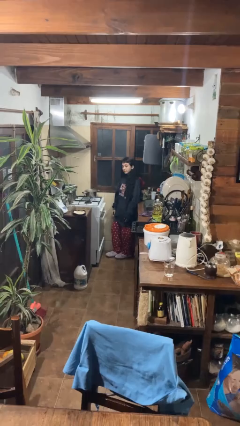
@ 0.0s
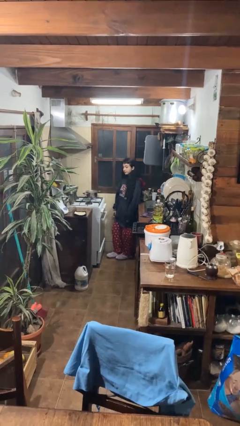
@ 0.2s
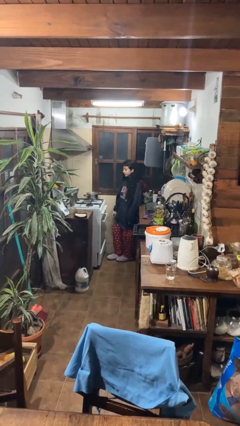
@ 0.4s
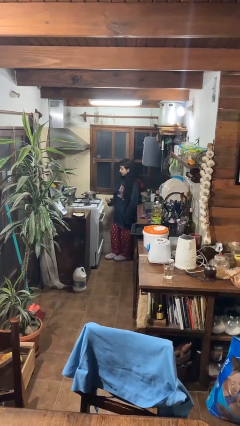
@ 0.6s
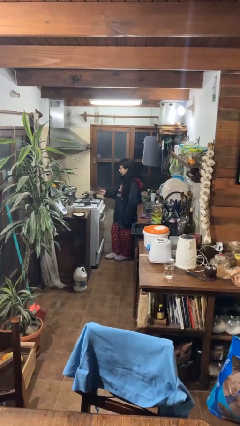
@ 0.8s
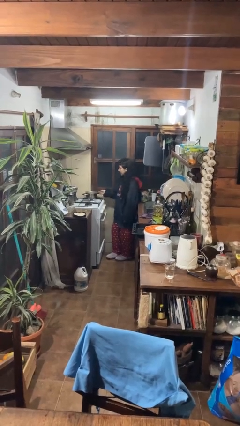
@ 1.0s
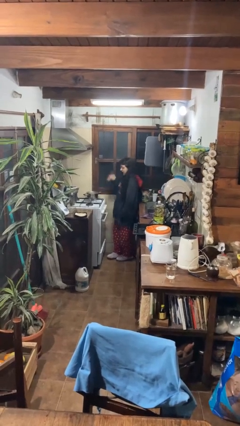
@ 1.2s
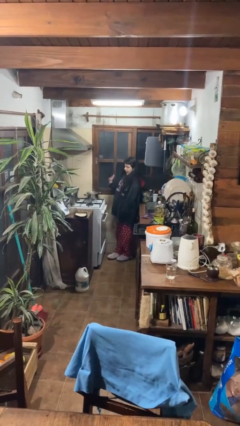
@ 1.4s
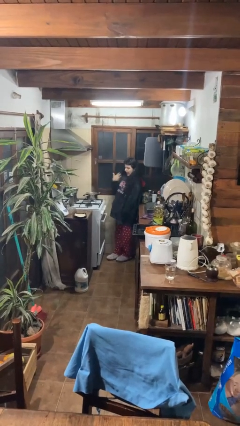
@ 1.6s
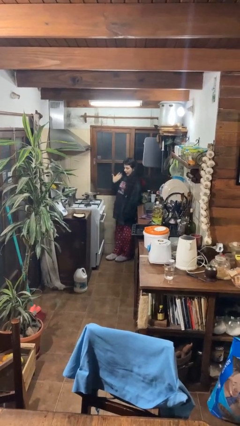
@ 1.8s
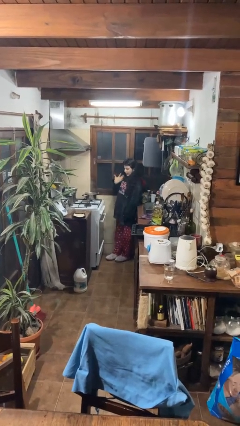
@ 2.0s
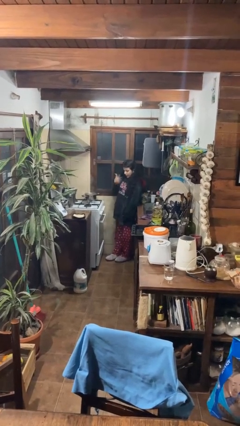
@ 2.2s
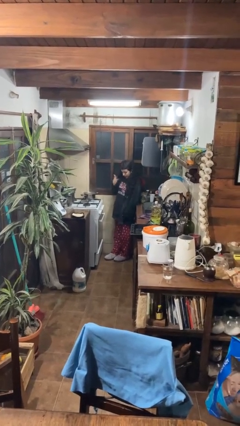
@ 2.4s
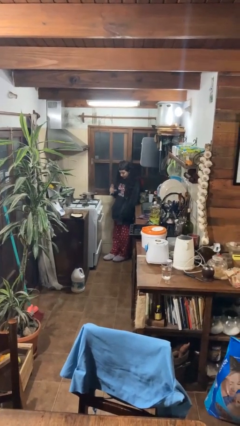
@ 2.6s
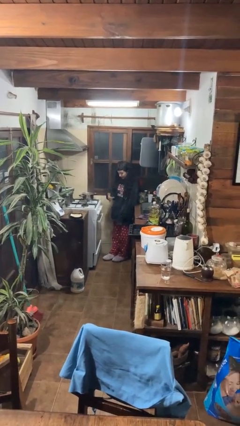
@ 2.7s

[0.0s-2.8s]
person burns hand

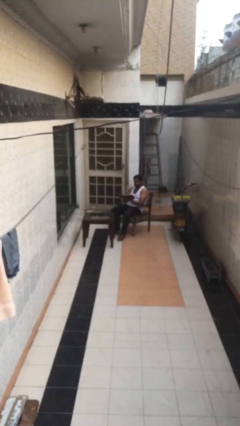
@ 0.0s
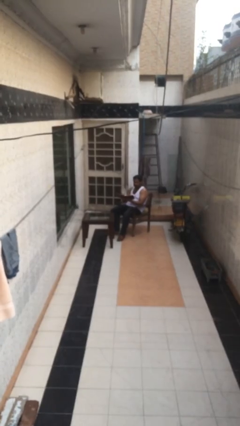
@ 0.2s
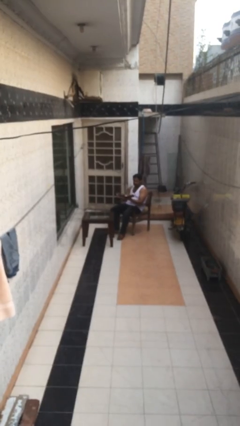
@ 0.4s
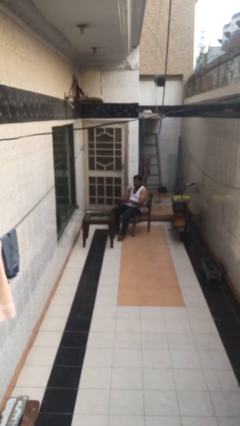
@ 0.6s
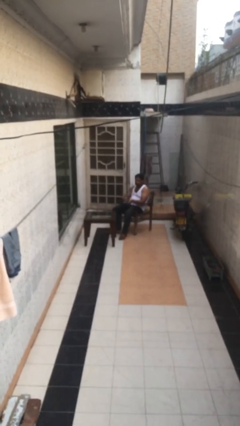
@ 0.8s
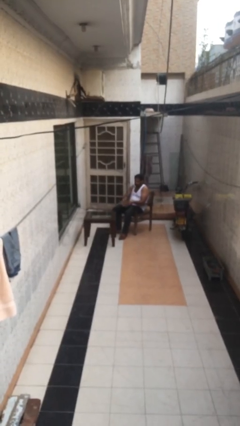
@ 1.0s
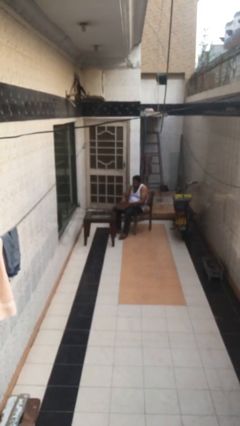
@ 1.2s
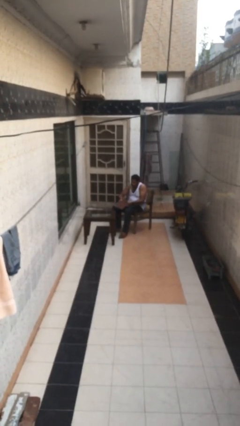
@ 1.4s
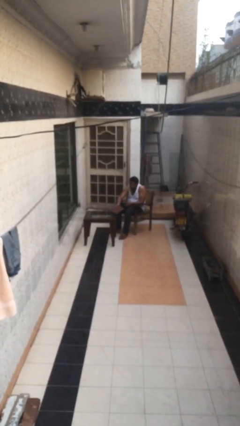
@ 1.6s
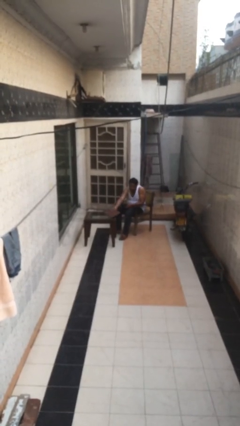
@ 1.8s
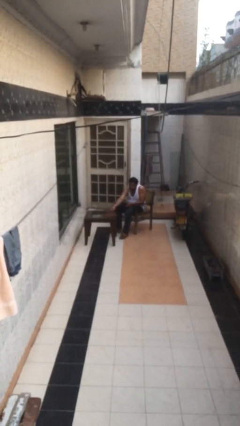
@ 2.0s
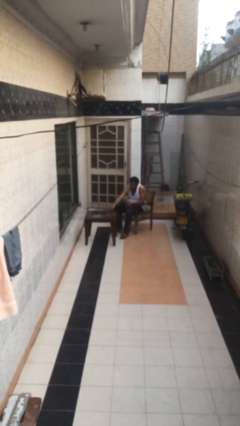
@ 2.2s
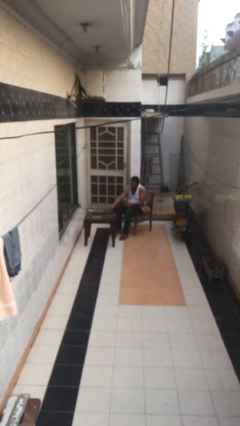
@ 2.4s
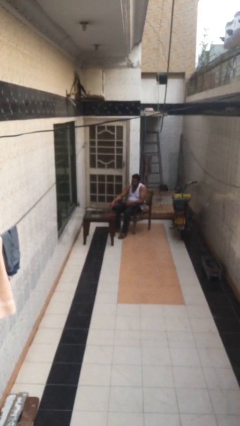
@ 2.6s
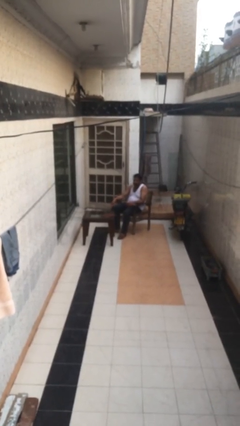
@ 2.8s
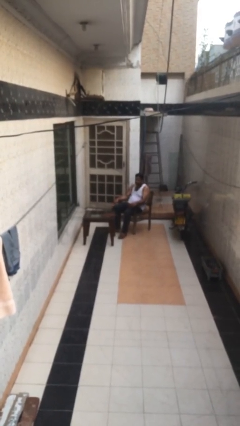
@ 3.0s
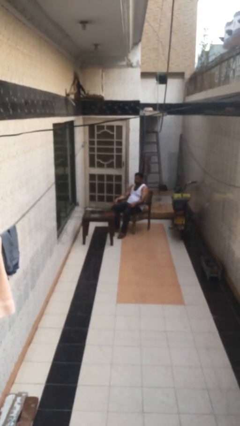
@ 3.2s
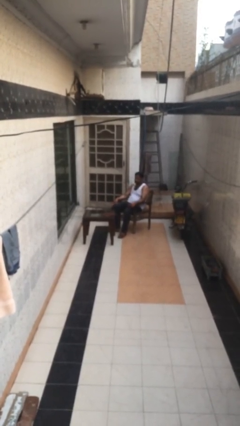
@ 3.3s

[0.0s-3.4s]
person puts down object on table

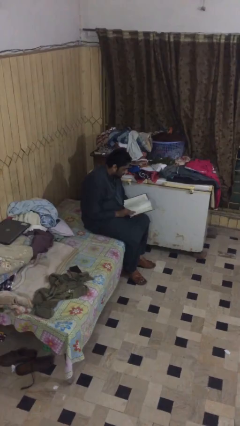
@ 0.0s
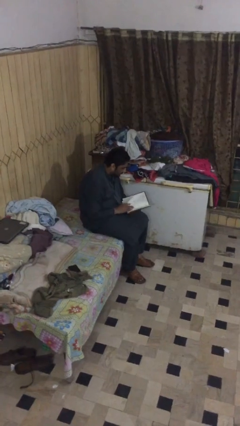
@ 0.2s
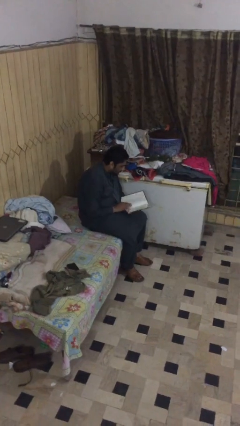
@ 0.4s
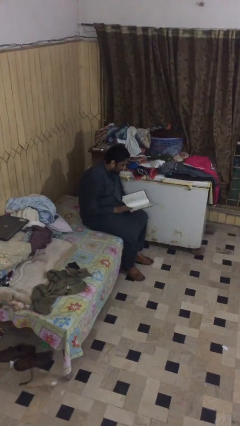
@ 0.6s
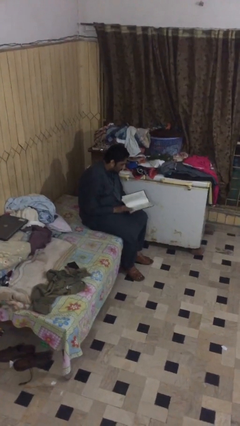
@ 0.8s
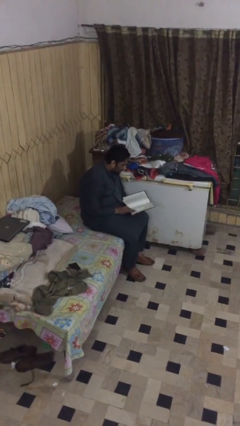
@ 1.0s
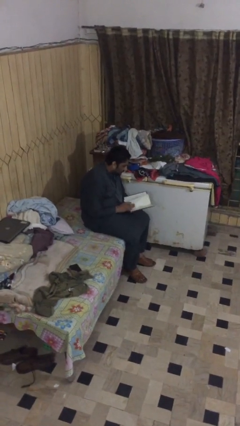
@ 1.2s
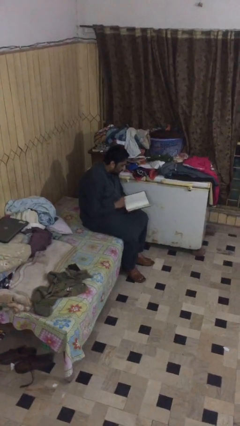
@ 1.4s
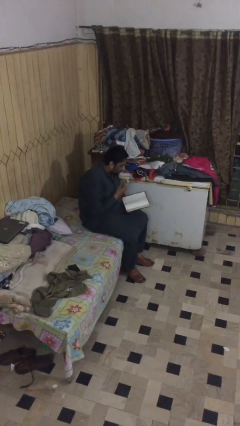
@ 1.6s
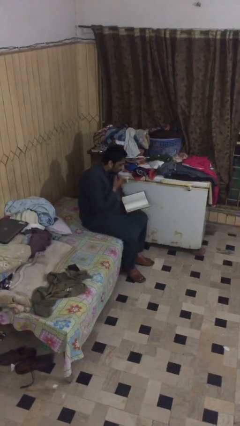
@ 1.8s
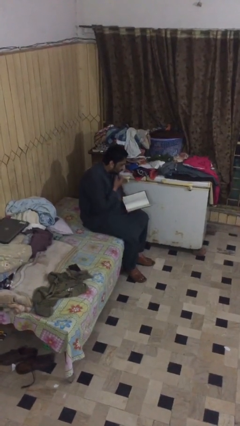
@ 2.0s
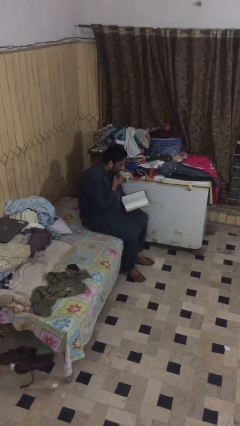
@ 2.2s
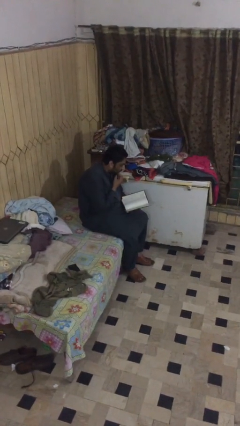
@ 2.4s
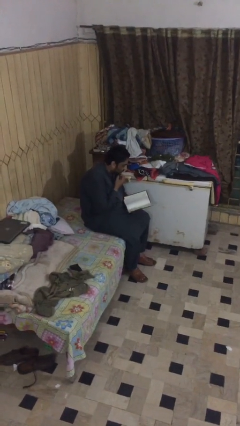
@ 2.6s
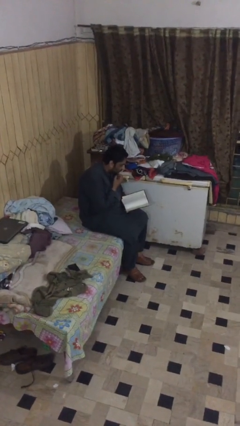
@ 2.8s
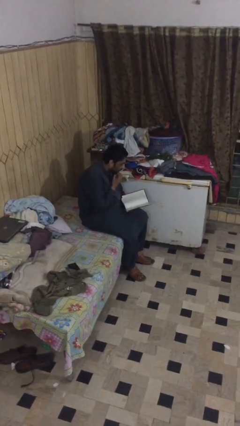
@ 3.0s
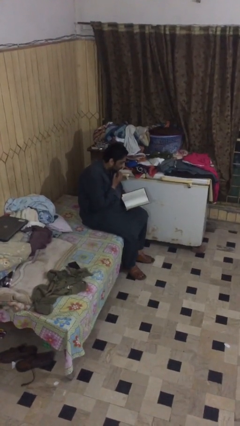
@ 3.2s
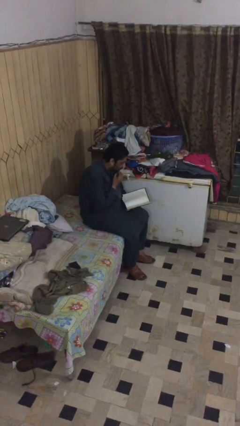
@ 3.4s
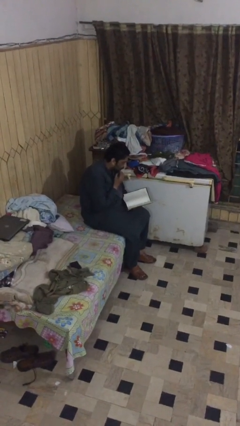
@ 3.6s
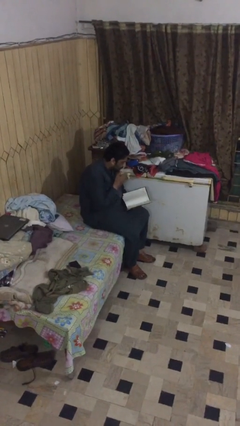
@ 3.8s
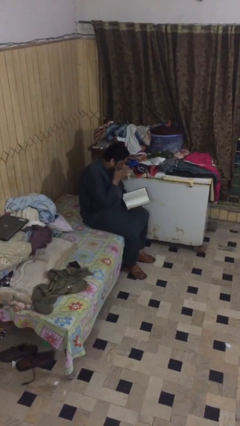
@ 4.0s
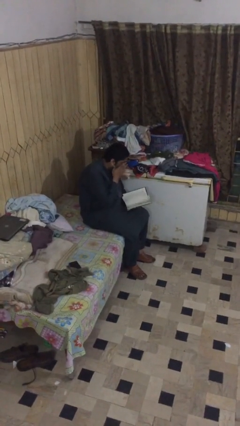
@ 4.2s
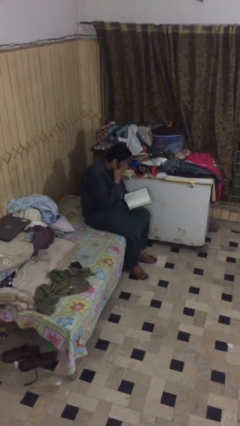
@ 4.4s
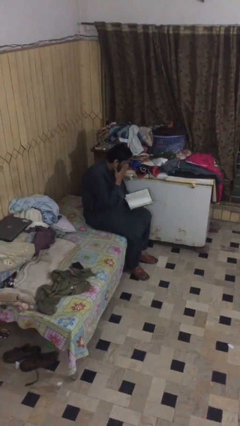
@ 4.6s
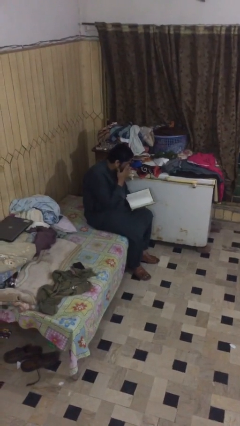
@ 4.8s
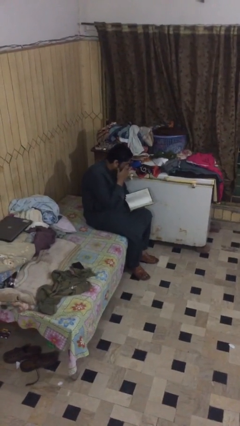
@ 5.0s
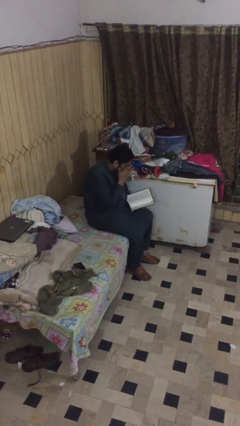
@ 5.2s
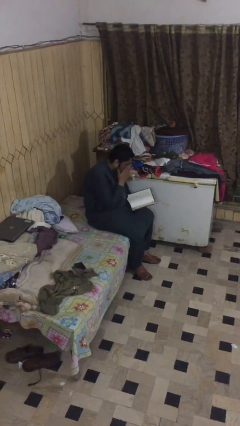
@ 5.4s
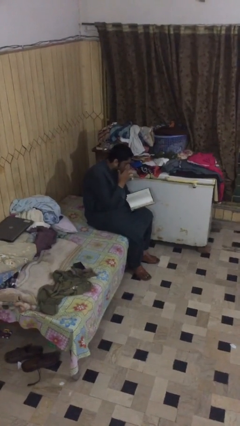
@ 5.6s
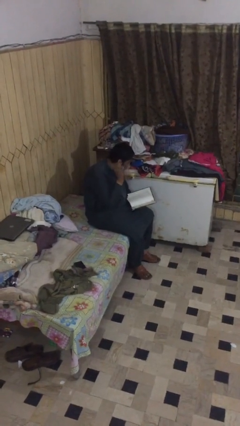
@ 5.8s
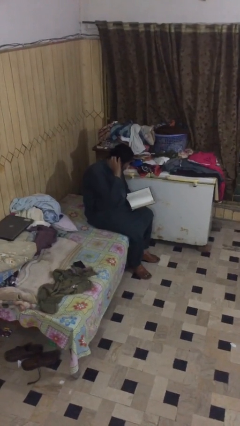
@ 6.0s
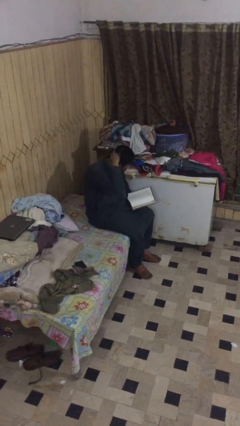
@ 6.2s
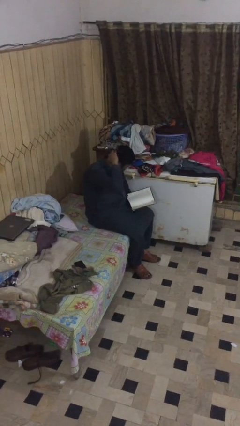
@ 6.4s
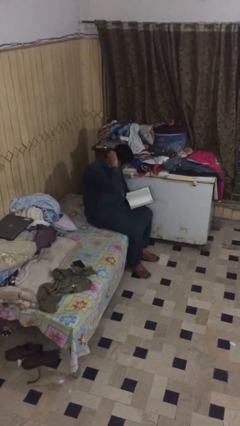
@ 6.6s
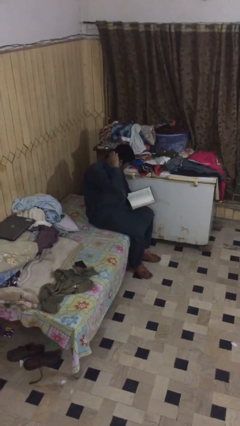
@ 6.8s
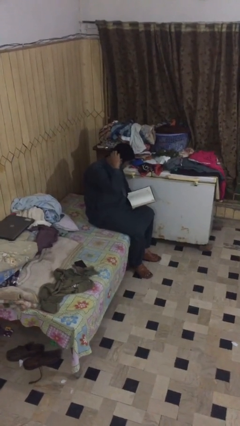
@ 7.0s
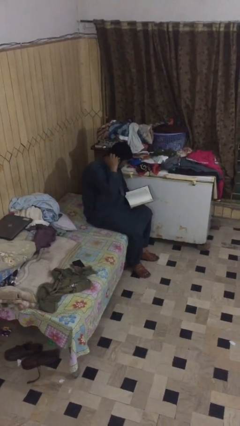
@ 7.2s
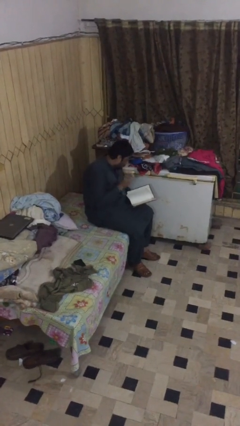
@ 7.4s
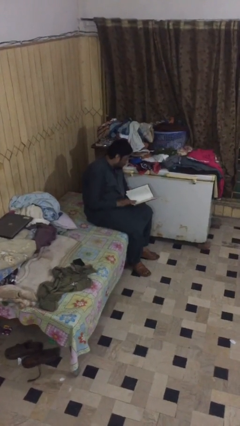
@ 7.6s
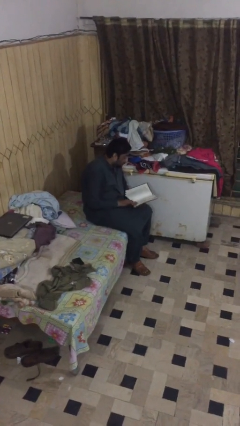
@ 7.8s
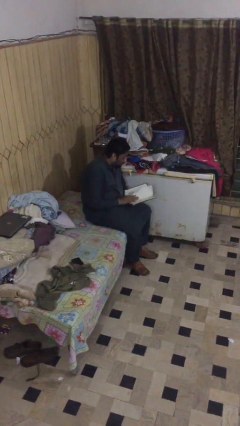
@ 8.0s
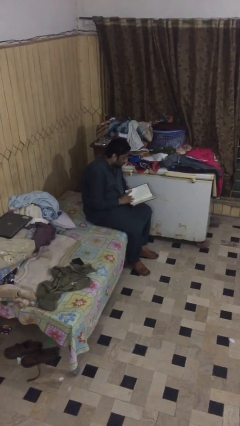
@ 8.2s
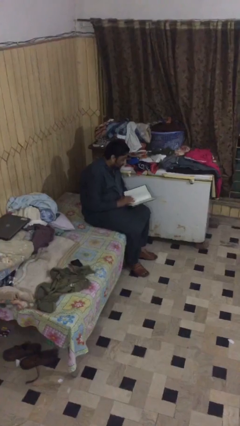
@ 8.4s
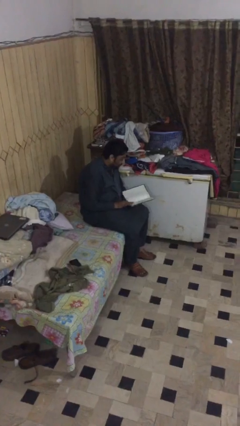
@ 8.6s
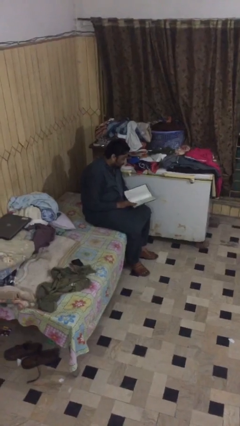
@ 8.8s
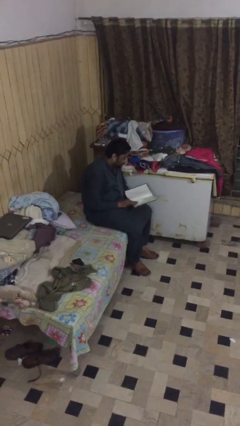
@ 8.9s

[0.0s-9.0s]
person reads document

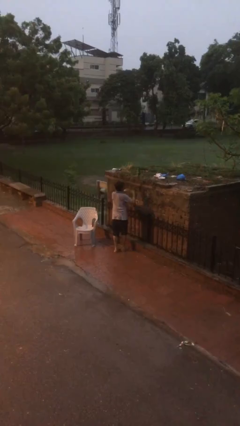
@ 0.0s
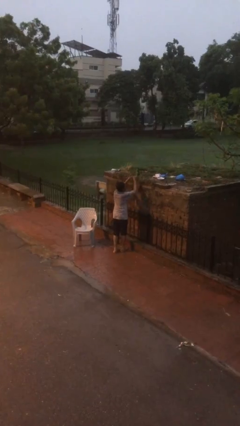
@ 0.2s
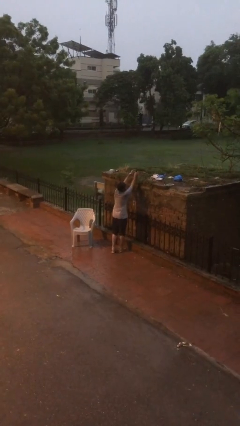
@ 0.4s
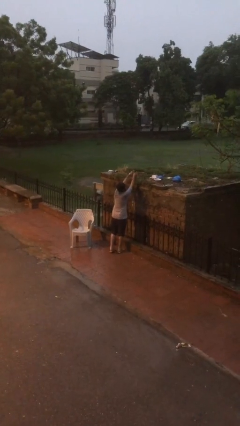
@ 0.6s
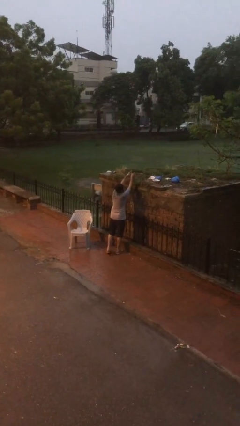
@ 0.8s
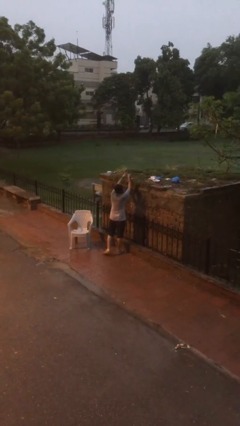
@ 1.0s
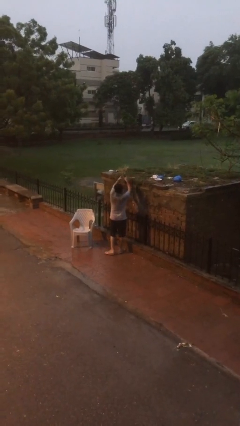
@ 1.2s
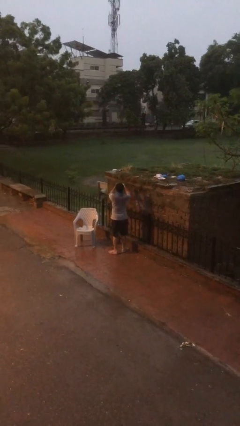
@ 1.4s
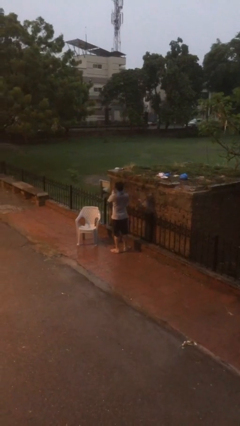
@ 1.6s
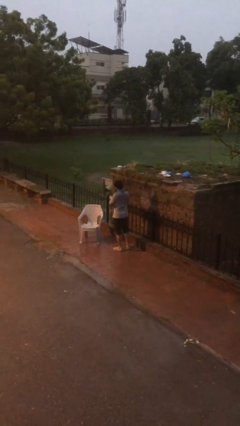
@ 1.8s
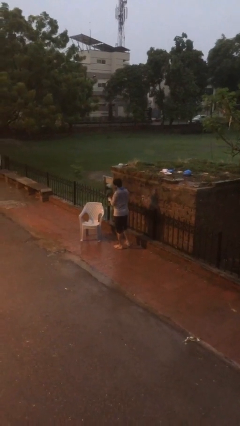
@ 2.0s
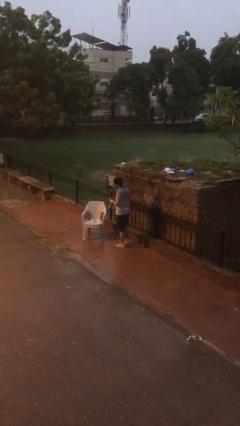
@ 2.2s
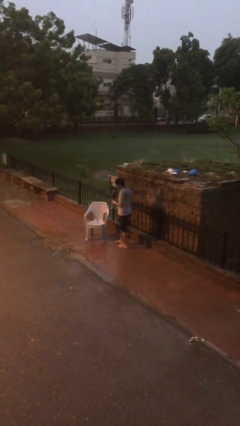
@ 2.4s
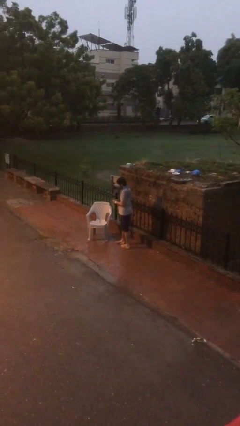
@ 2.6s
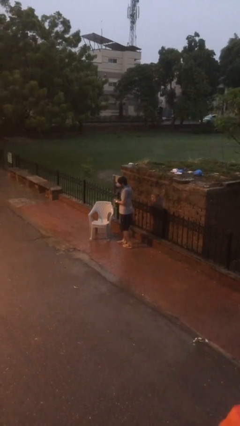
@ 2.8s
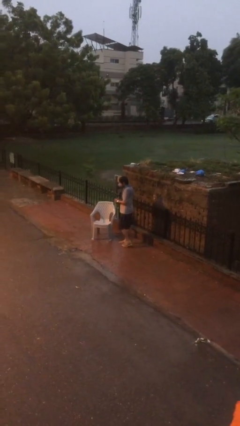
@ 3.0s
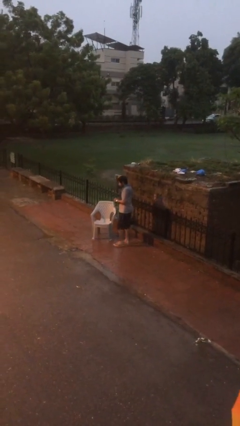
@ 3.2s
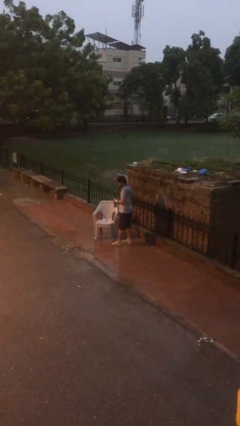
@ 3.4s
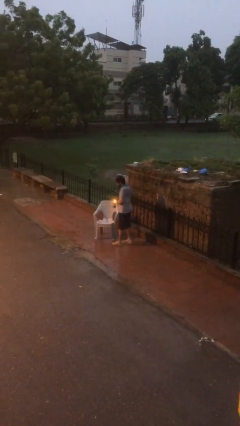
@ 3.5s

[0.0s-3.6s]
person picks up object from shelf
